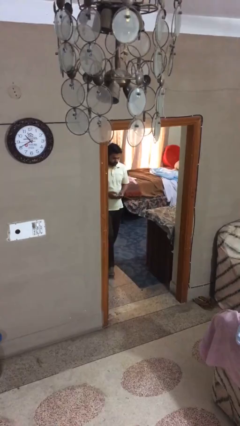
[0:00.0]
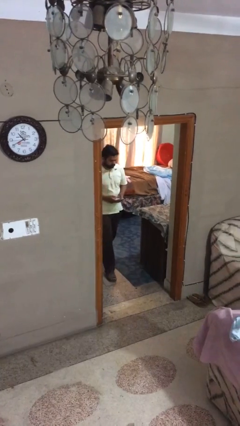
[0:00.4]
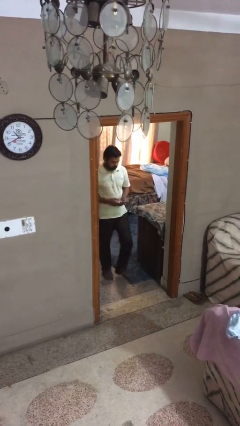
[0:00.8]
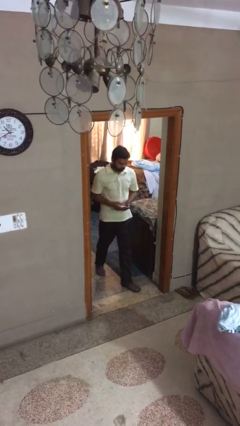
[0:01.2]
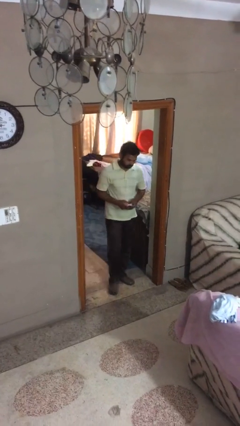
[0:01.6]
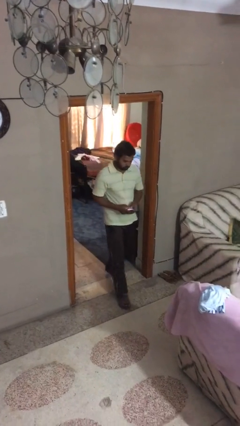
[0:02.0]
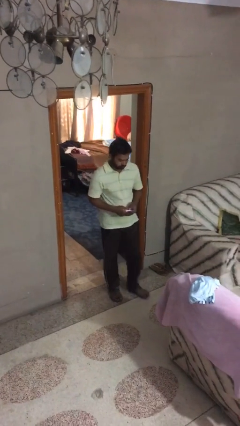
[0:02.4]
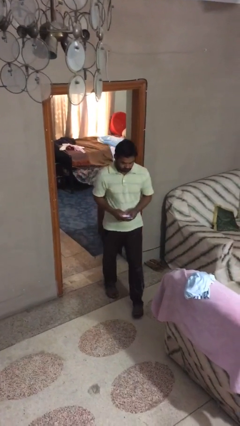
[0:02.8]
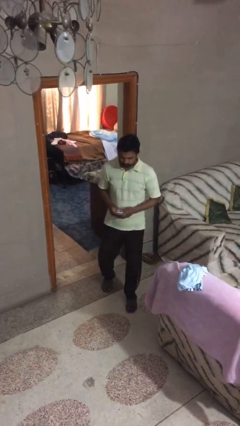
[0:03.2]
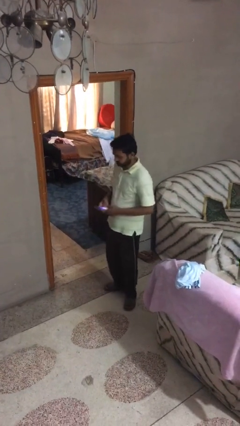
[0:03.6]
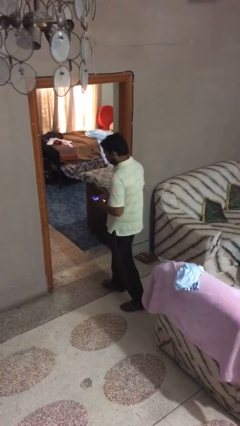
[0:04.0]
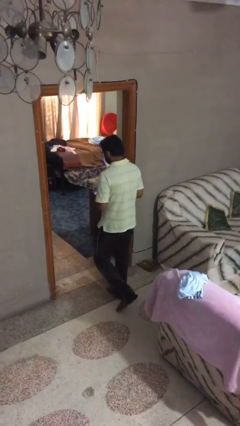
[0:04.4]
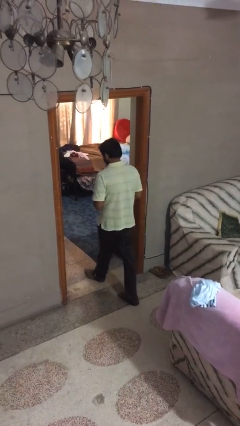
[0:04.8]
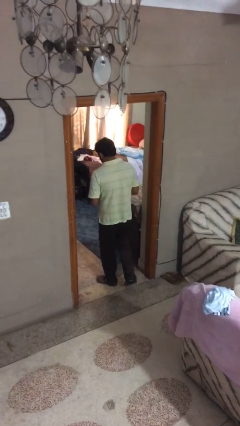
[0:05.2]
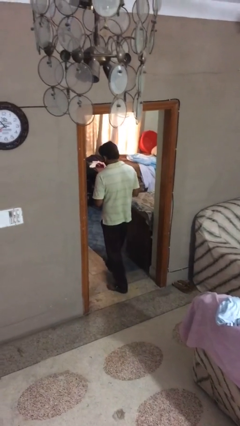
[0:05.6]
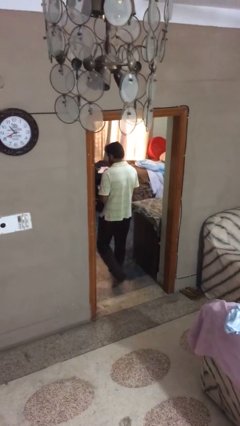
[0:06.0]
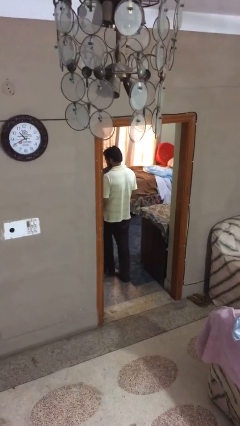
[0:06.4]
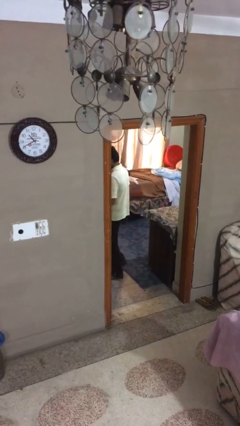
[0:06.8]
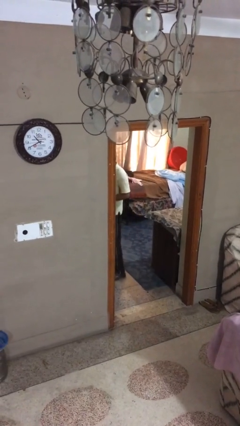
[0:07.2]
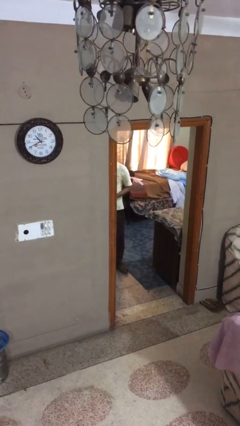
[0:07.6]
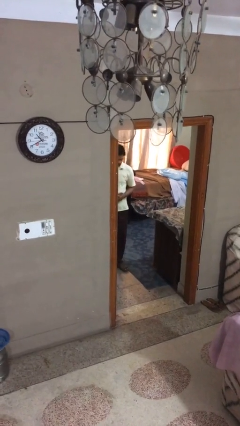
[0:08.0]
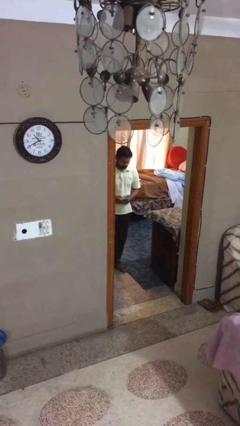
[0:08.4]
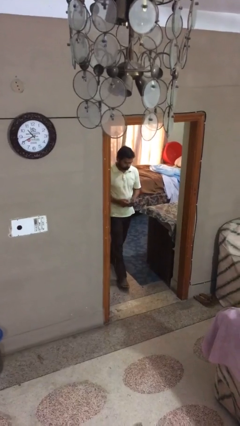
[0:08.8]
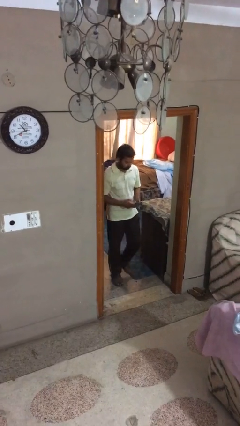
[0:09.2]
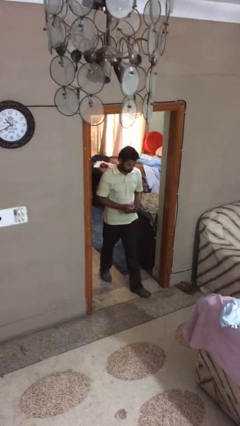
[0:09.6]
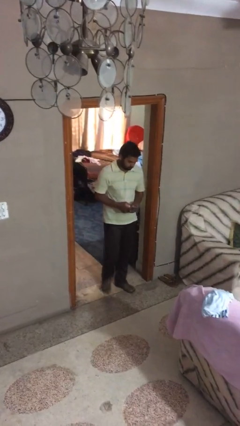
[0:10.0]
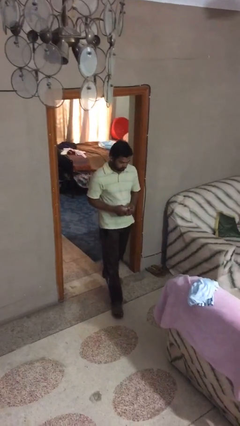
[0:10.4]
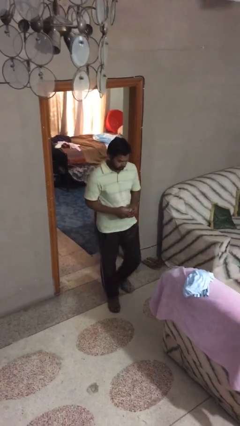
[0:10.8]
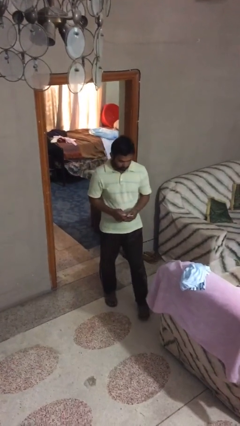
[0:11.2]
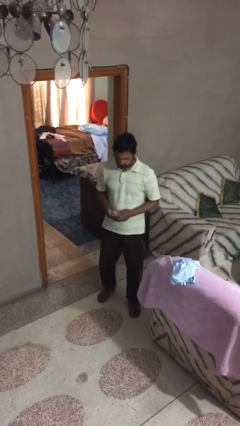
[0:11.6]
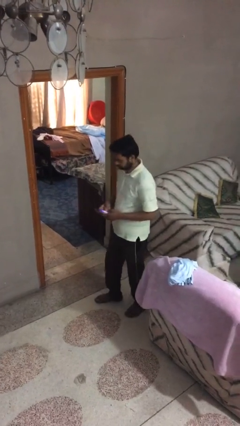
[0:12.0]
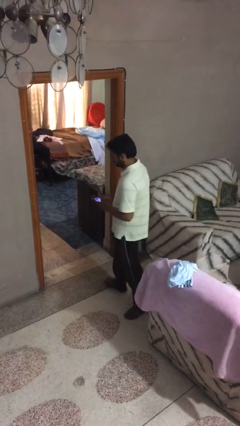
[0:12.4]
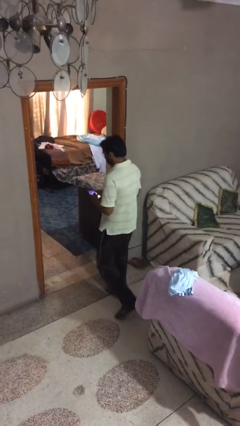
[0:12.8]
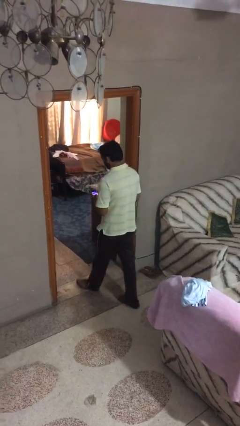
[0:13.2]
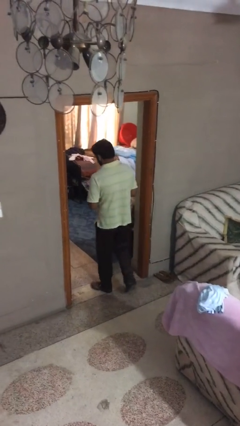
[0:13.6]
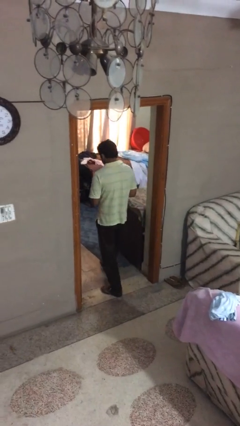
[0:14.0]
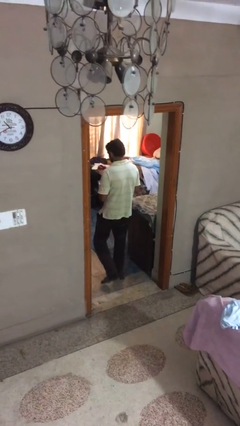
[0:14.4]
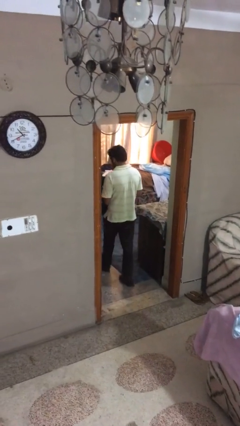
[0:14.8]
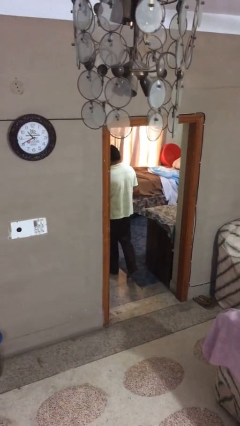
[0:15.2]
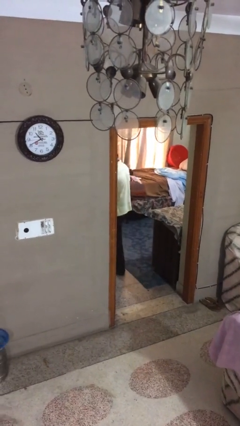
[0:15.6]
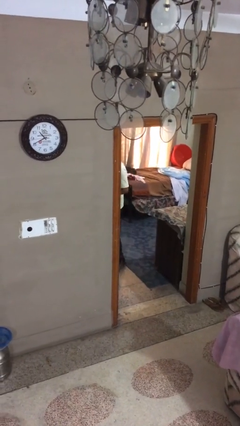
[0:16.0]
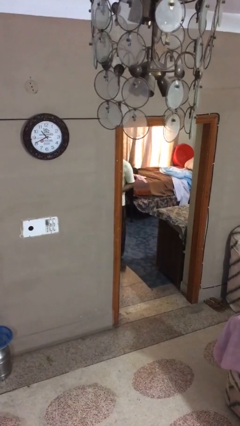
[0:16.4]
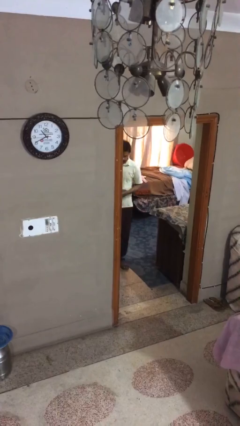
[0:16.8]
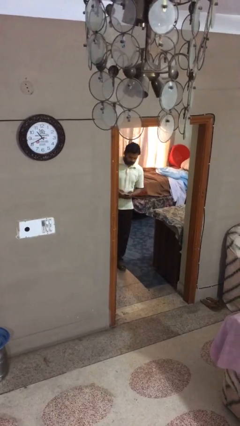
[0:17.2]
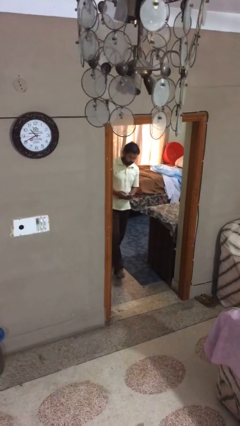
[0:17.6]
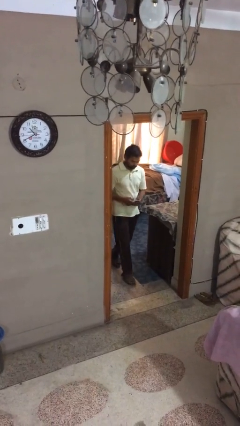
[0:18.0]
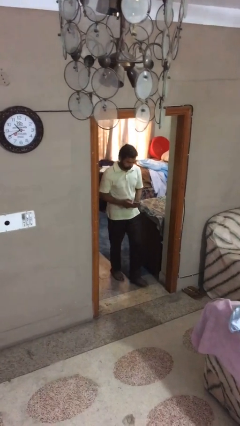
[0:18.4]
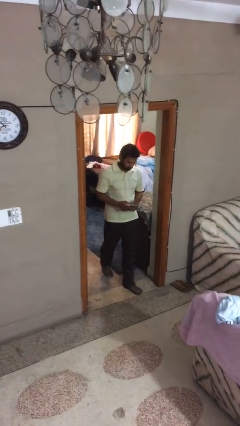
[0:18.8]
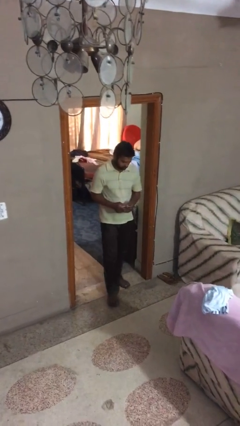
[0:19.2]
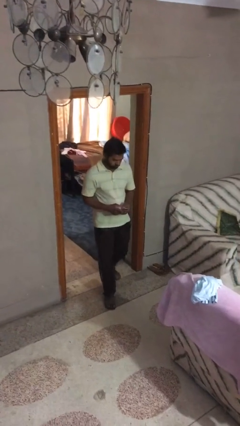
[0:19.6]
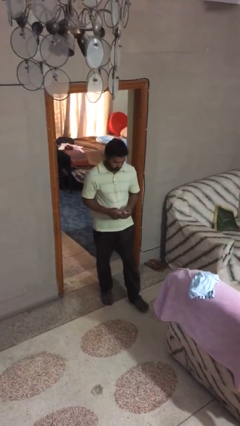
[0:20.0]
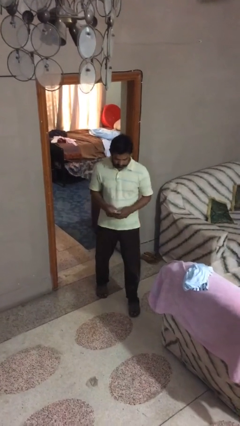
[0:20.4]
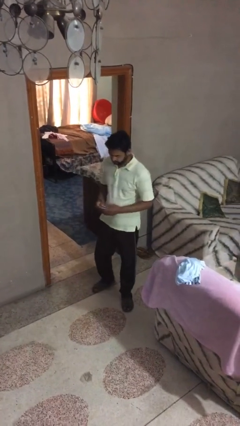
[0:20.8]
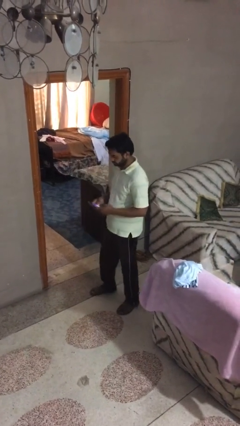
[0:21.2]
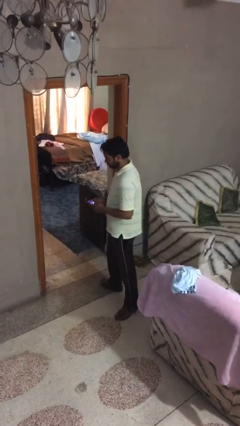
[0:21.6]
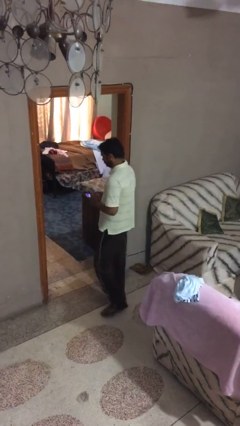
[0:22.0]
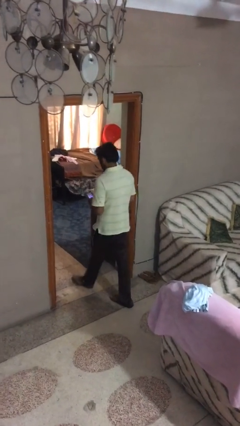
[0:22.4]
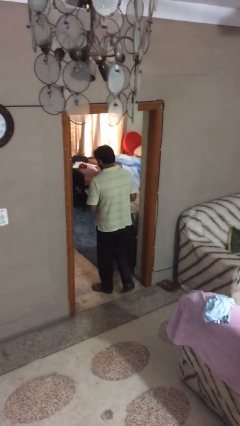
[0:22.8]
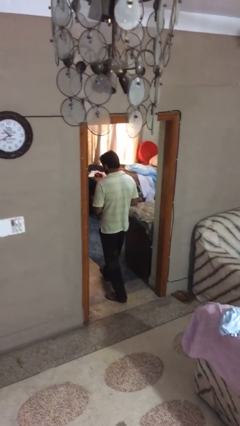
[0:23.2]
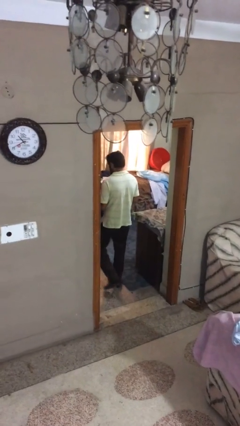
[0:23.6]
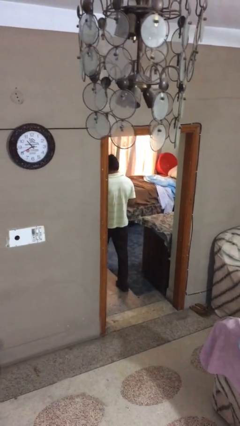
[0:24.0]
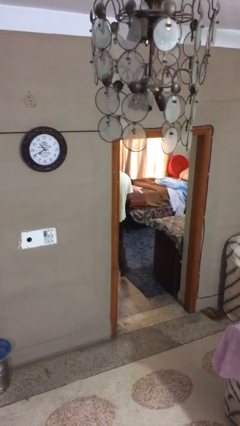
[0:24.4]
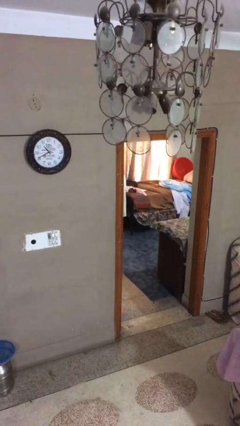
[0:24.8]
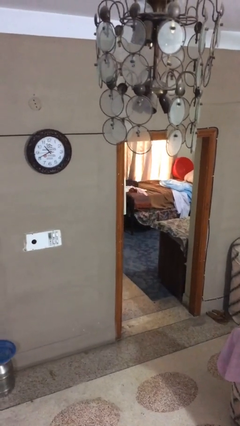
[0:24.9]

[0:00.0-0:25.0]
person texts on phone

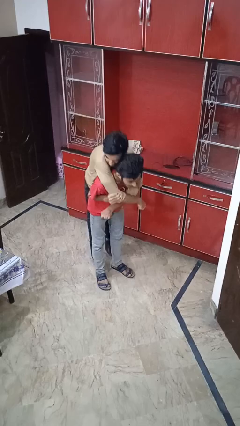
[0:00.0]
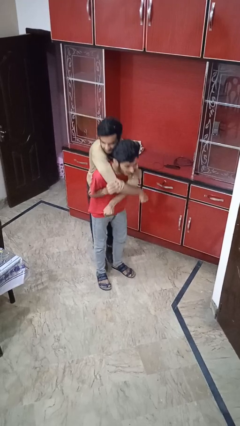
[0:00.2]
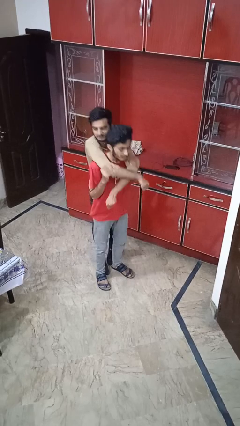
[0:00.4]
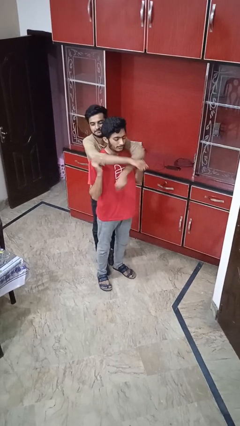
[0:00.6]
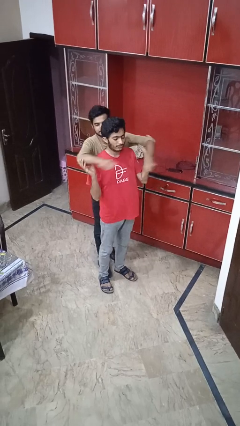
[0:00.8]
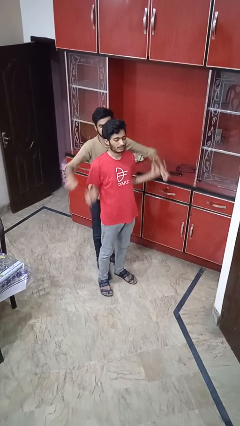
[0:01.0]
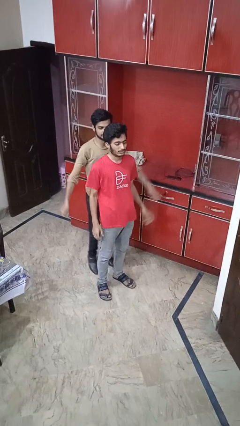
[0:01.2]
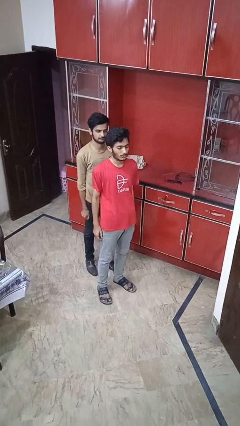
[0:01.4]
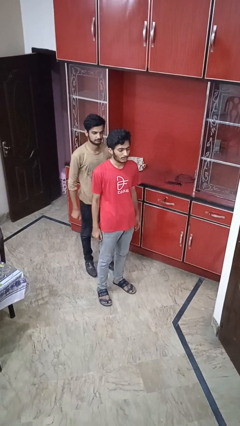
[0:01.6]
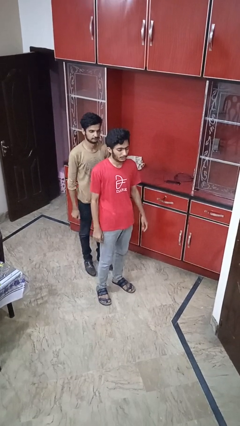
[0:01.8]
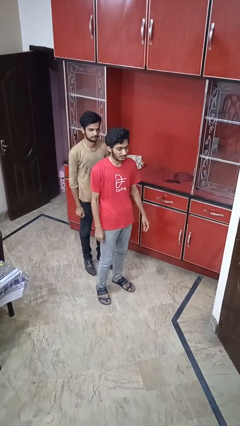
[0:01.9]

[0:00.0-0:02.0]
person puts down person

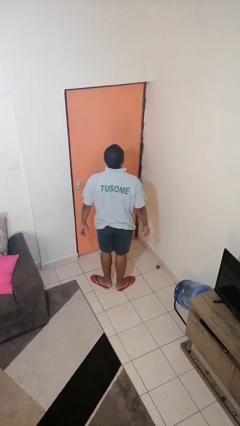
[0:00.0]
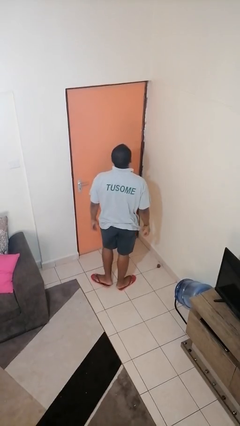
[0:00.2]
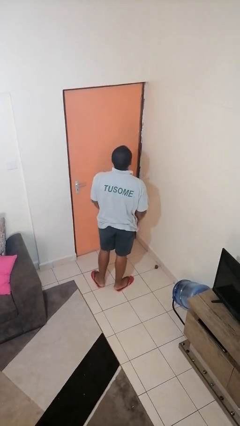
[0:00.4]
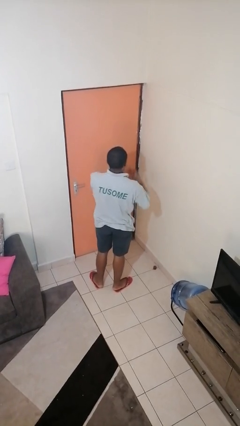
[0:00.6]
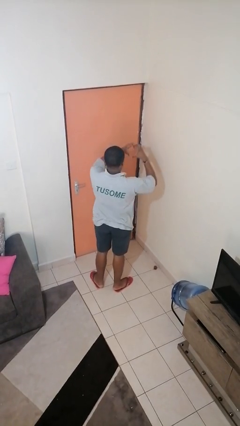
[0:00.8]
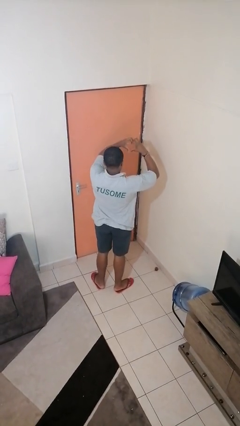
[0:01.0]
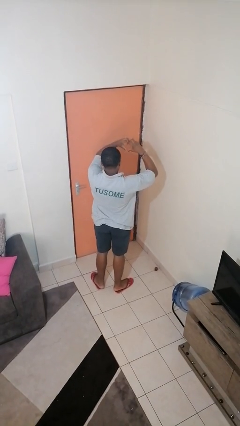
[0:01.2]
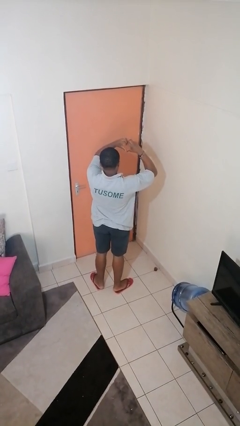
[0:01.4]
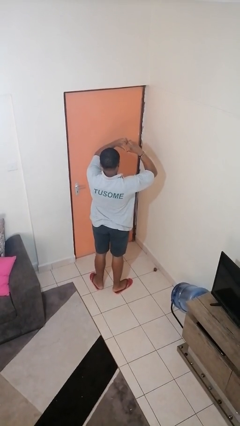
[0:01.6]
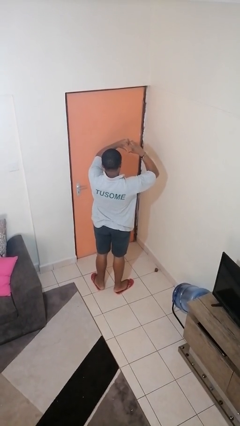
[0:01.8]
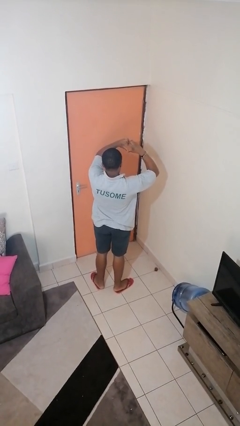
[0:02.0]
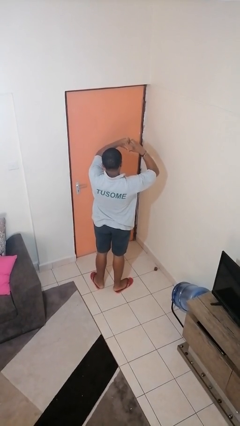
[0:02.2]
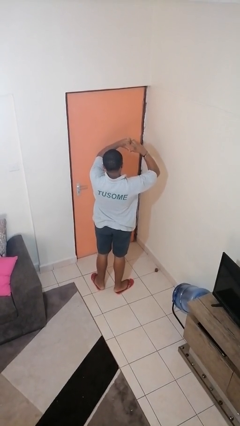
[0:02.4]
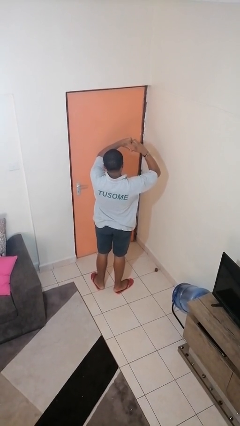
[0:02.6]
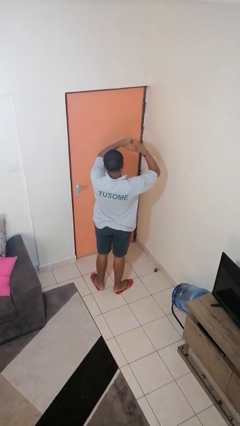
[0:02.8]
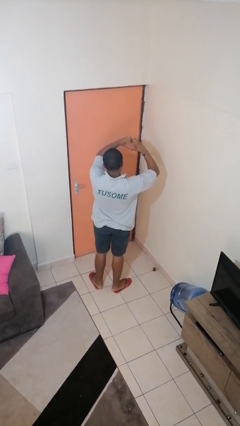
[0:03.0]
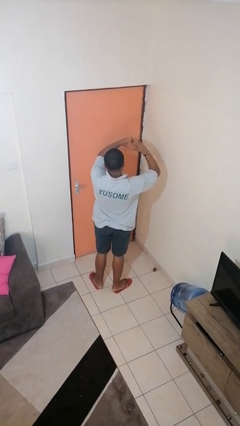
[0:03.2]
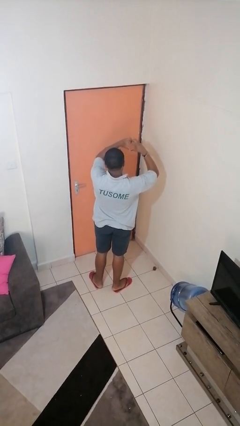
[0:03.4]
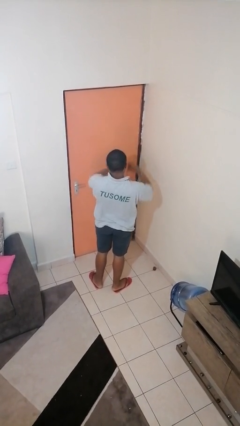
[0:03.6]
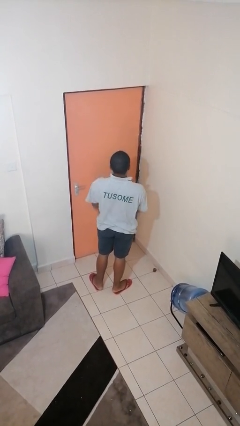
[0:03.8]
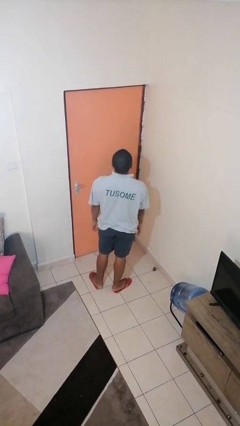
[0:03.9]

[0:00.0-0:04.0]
person gestures heart
